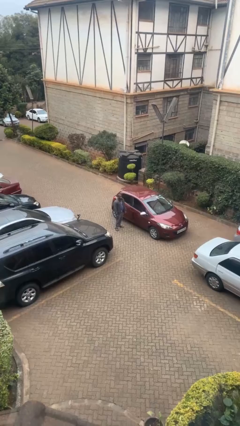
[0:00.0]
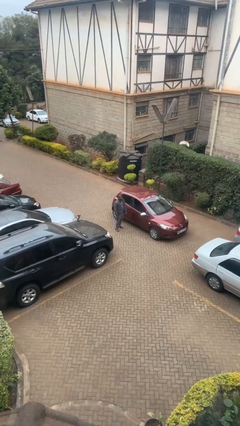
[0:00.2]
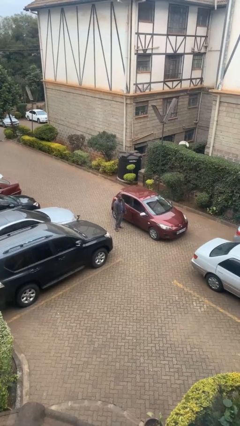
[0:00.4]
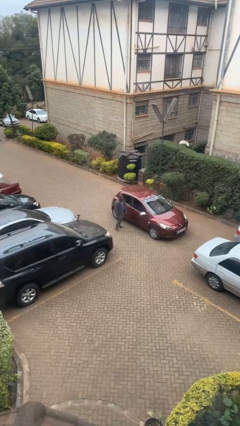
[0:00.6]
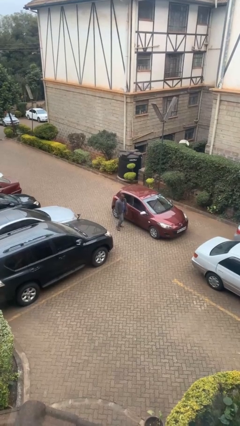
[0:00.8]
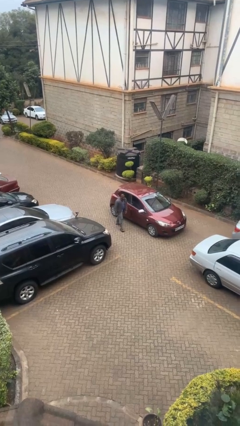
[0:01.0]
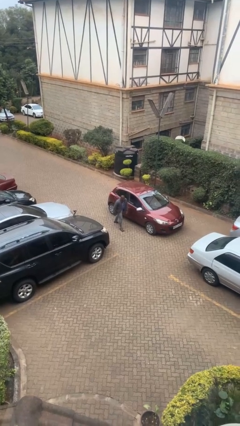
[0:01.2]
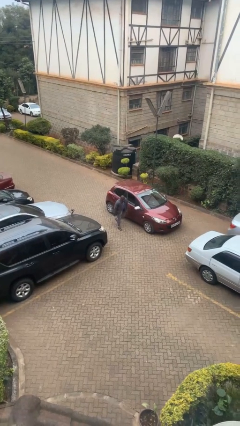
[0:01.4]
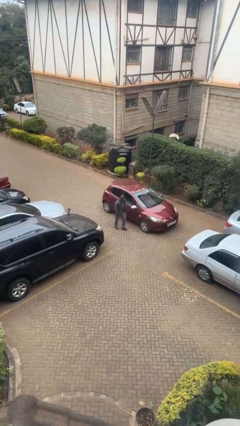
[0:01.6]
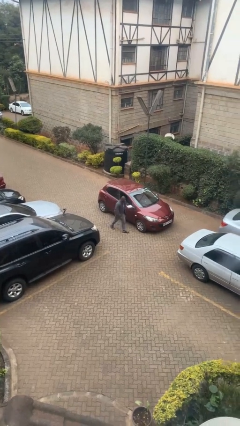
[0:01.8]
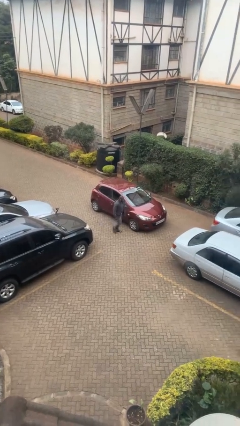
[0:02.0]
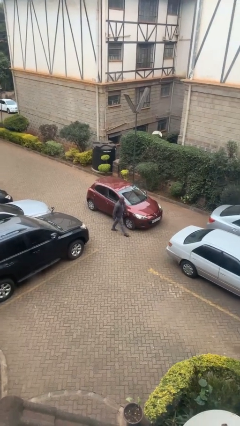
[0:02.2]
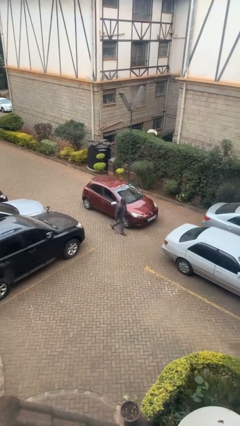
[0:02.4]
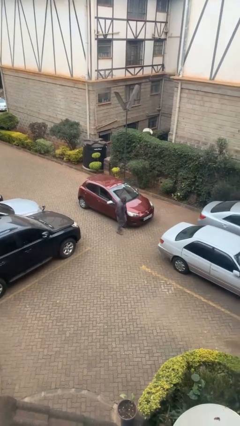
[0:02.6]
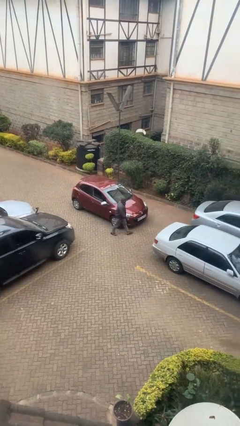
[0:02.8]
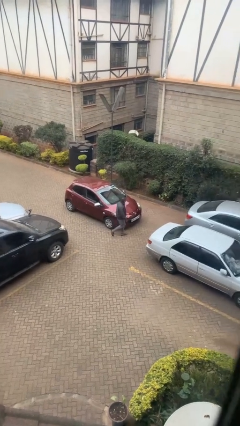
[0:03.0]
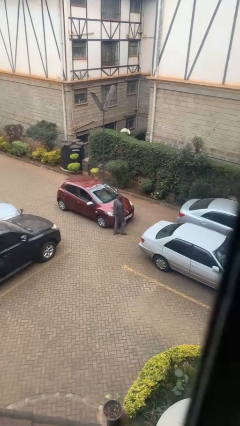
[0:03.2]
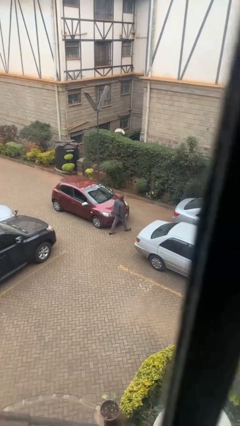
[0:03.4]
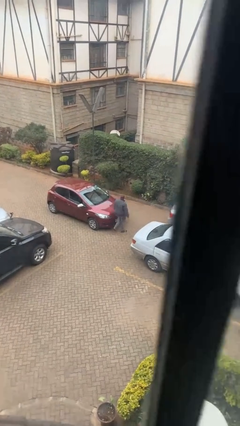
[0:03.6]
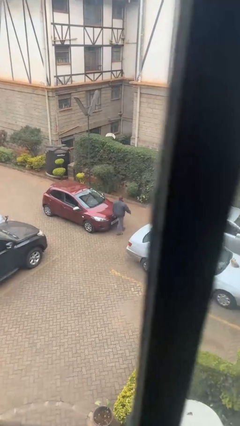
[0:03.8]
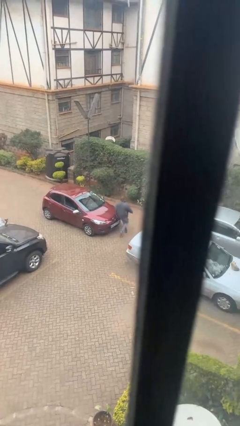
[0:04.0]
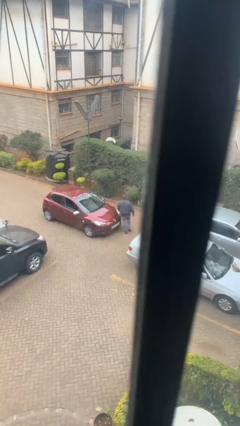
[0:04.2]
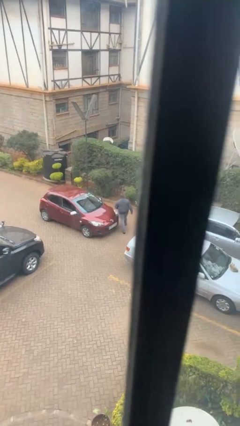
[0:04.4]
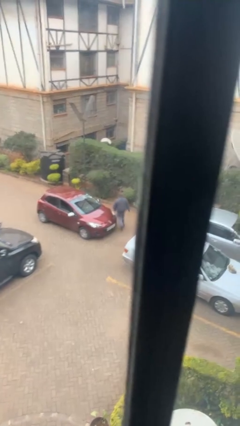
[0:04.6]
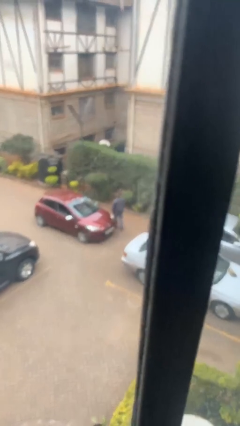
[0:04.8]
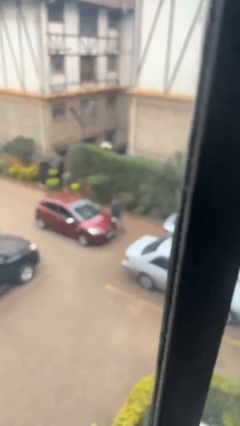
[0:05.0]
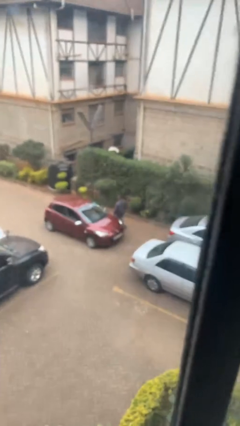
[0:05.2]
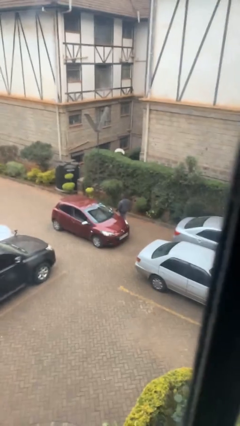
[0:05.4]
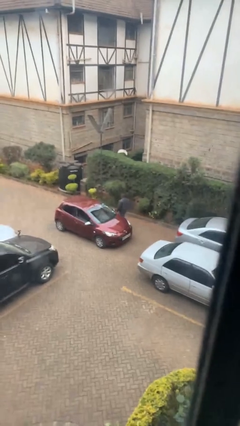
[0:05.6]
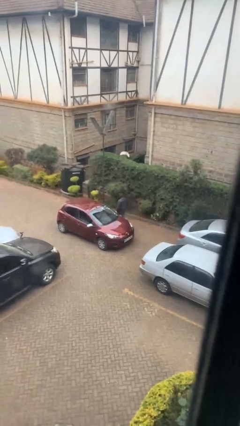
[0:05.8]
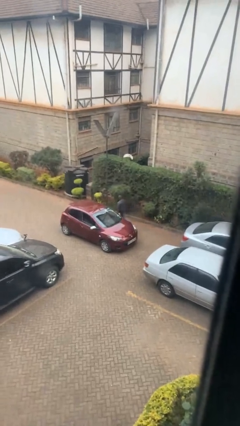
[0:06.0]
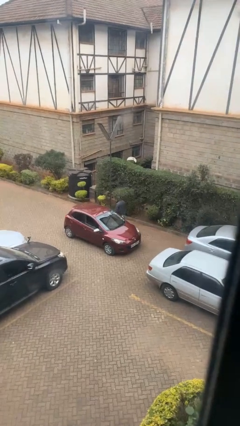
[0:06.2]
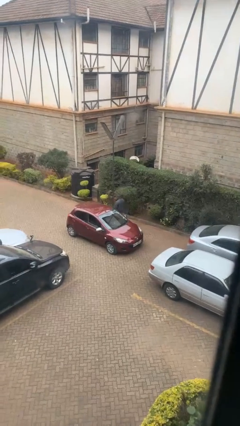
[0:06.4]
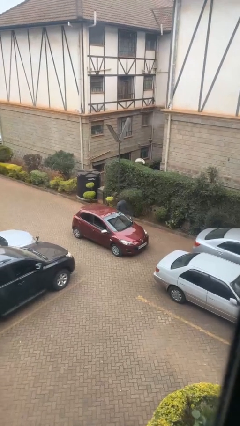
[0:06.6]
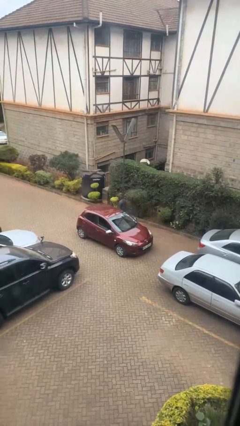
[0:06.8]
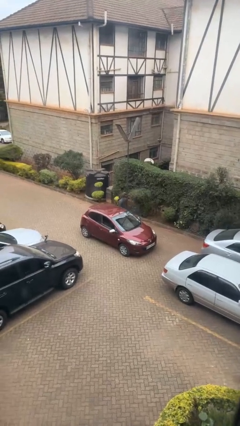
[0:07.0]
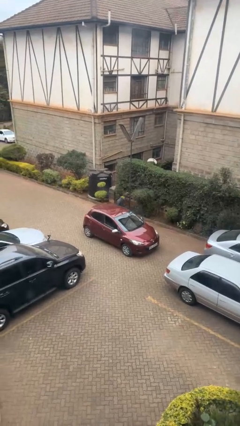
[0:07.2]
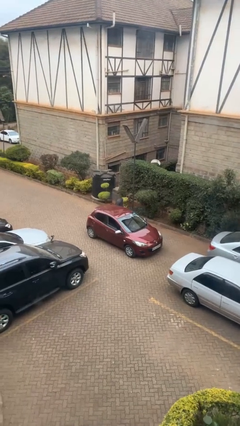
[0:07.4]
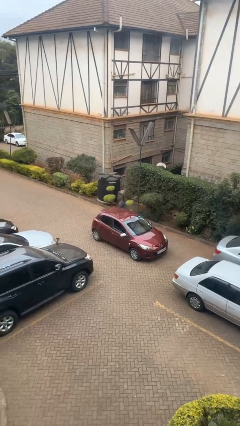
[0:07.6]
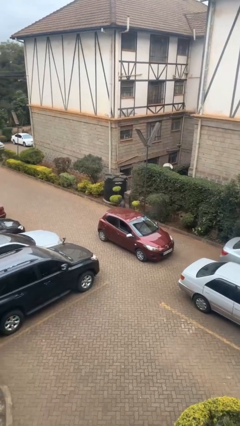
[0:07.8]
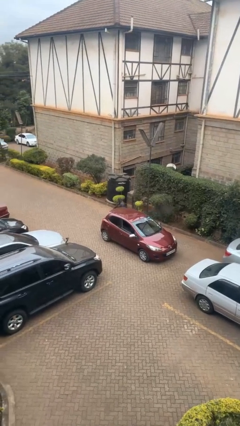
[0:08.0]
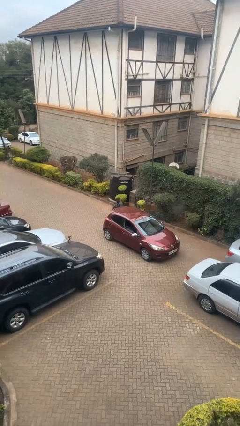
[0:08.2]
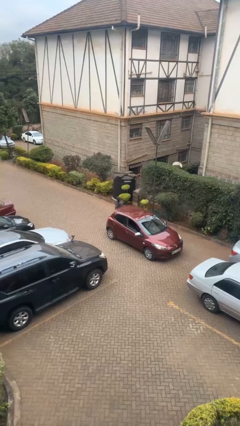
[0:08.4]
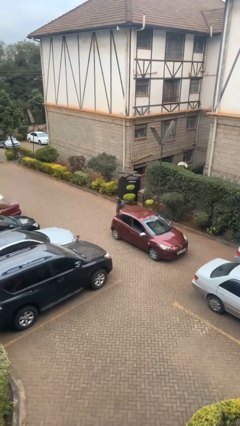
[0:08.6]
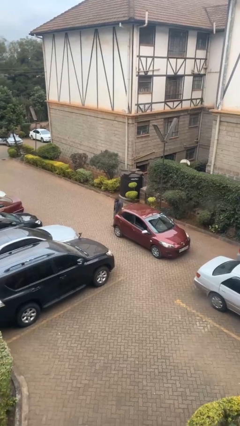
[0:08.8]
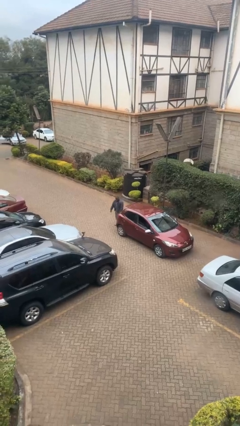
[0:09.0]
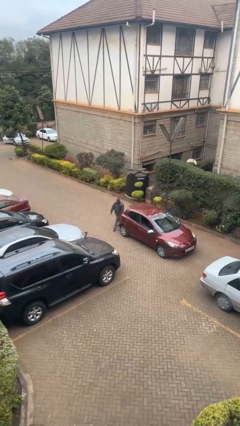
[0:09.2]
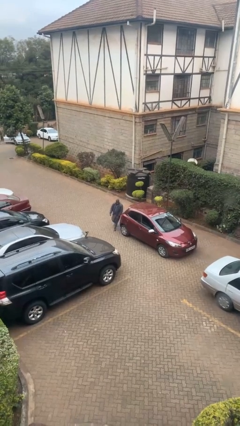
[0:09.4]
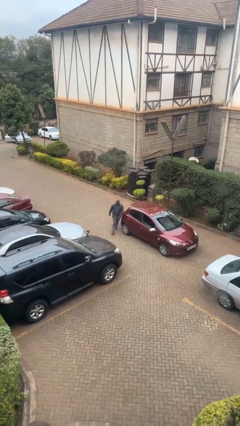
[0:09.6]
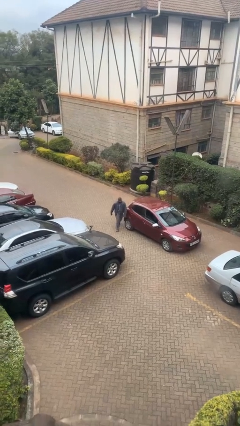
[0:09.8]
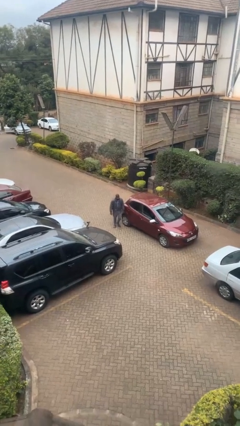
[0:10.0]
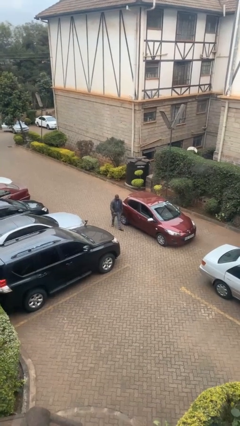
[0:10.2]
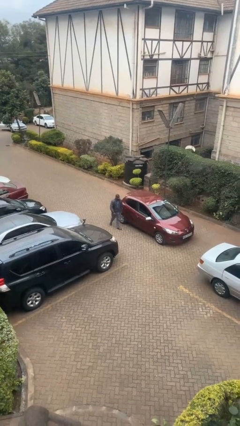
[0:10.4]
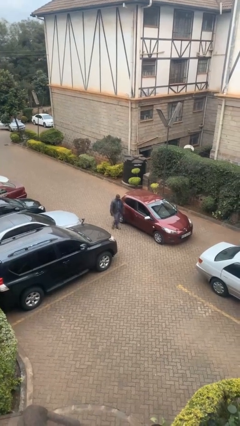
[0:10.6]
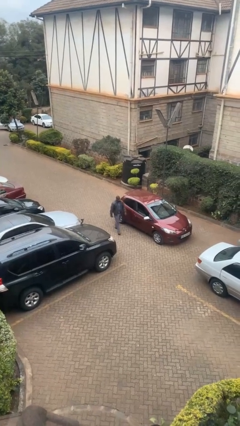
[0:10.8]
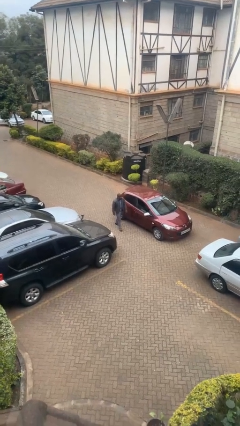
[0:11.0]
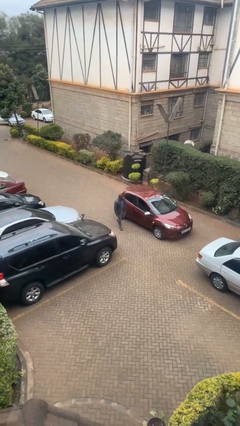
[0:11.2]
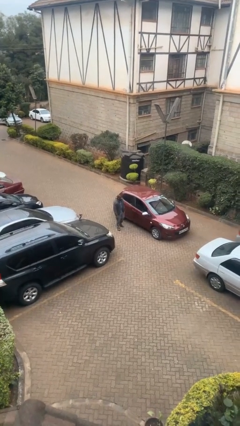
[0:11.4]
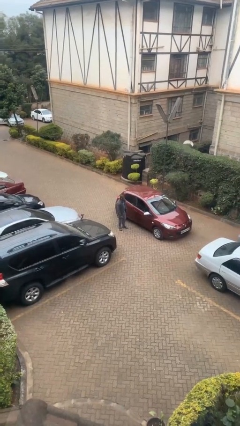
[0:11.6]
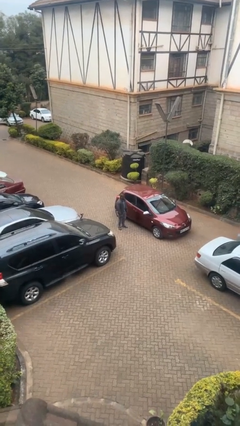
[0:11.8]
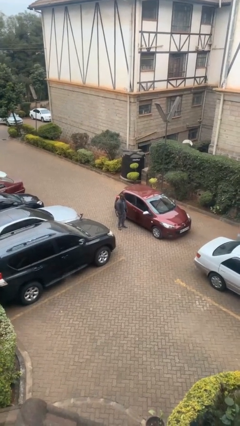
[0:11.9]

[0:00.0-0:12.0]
person walks around car

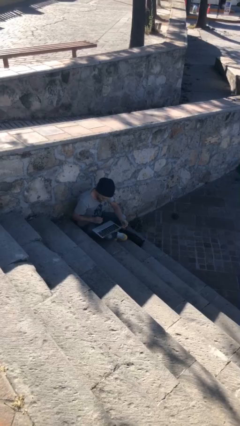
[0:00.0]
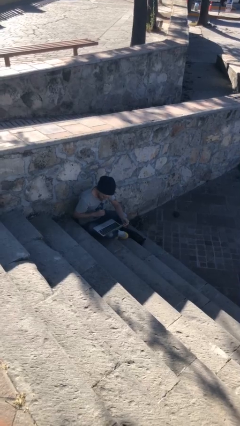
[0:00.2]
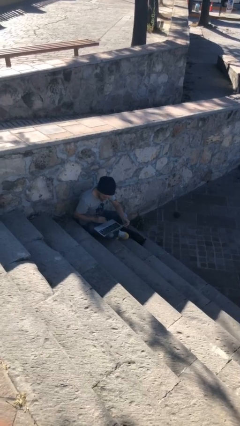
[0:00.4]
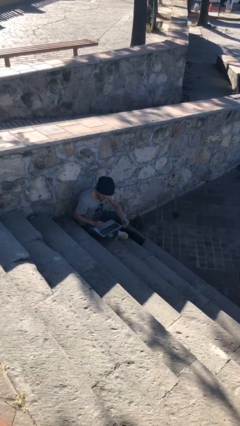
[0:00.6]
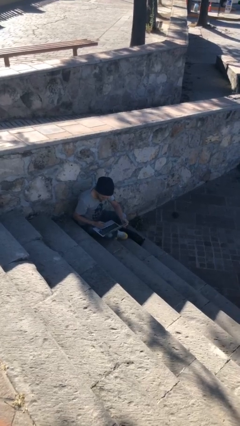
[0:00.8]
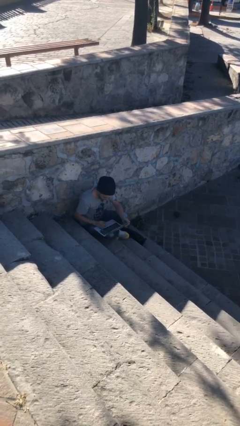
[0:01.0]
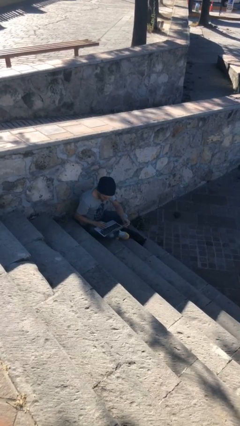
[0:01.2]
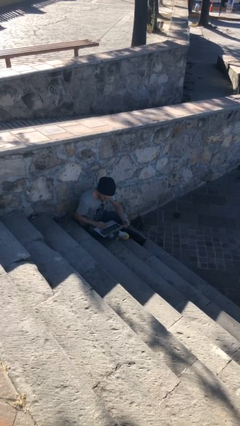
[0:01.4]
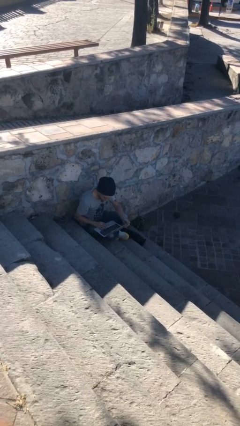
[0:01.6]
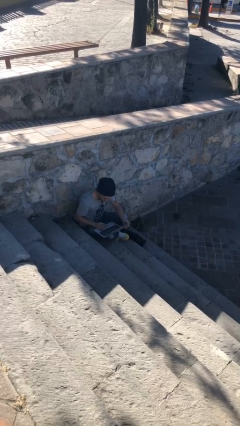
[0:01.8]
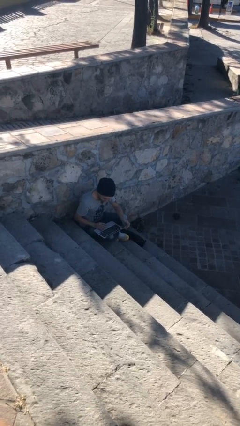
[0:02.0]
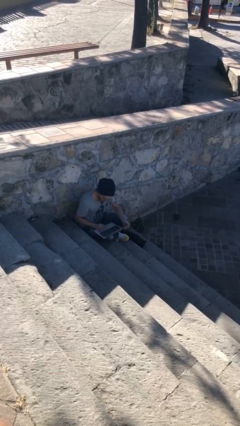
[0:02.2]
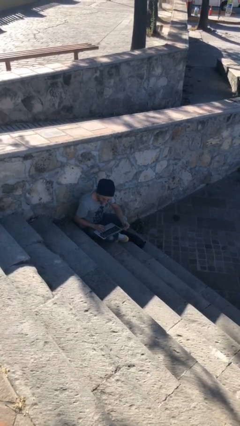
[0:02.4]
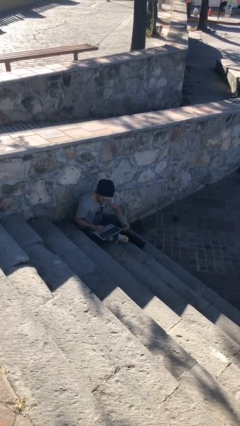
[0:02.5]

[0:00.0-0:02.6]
person interacts with laptop

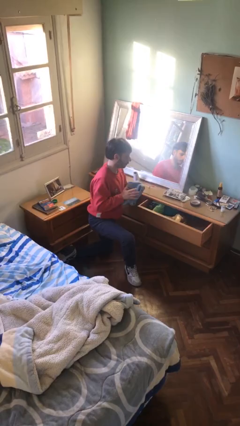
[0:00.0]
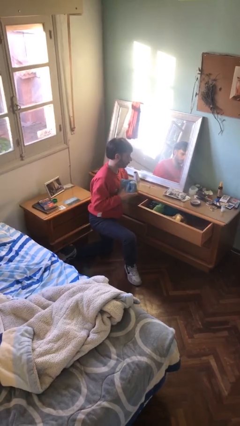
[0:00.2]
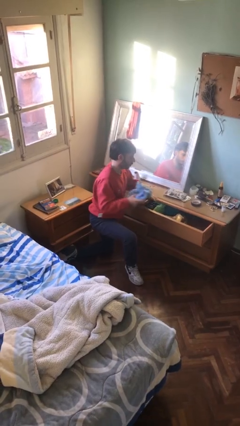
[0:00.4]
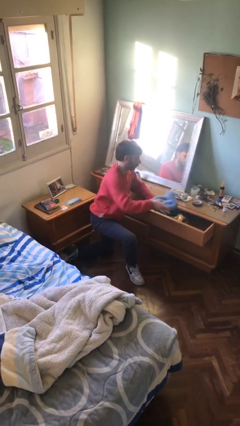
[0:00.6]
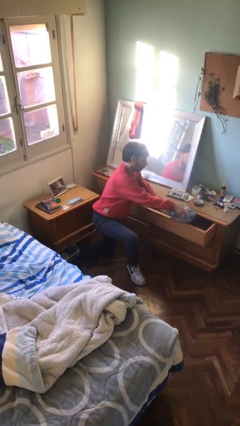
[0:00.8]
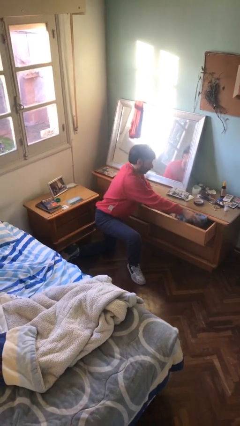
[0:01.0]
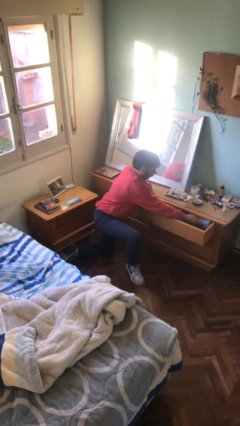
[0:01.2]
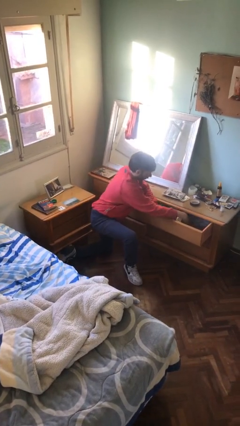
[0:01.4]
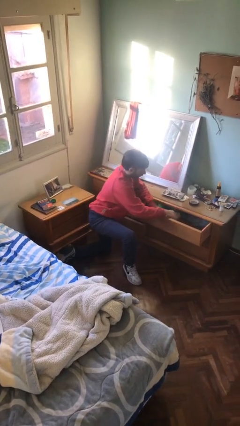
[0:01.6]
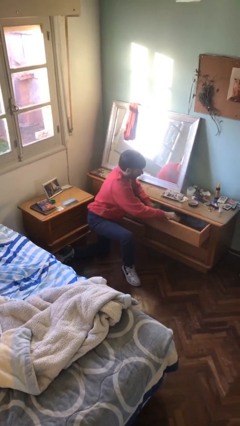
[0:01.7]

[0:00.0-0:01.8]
person puts clothes into dresser

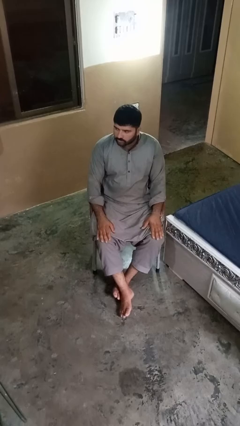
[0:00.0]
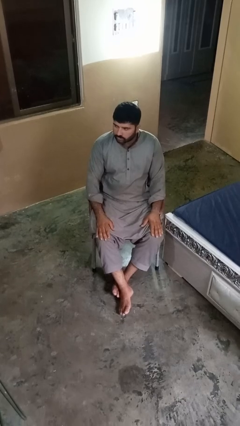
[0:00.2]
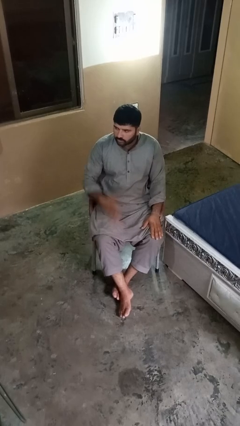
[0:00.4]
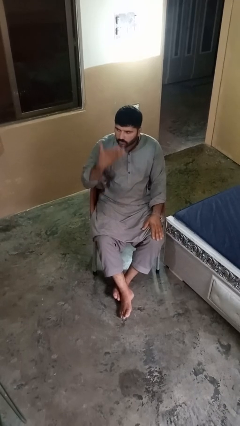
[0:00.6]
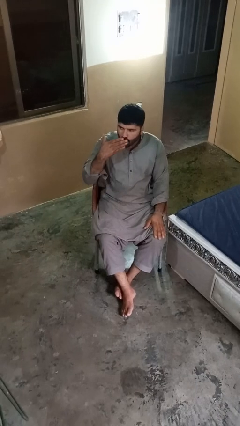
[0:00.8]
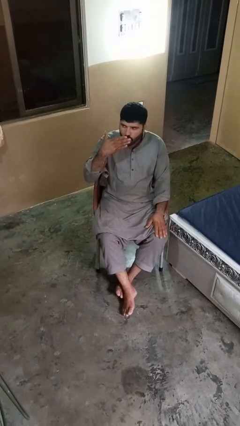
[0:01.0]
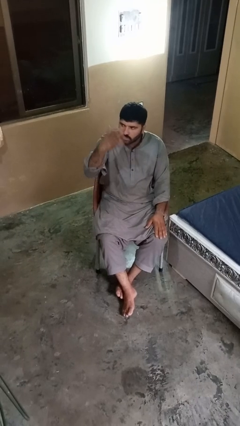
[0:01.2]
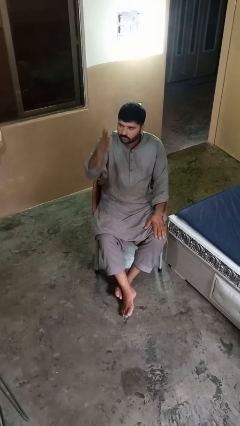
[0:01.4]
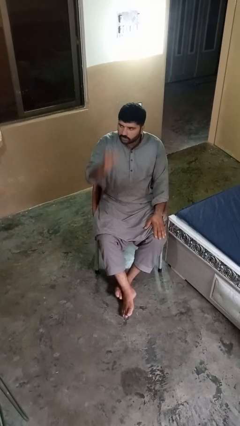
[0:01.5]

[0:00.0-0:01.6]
person gestures blow kiss
